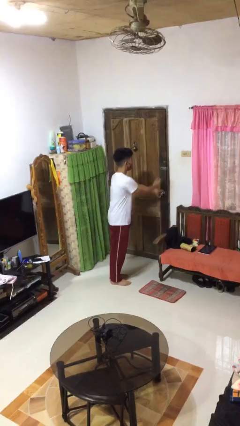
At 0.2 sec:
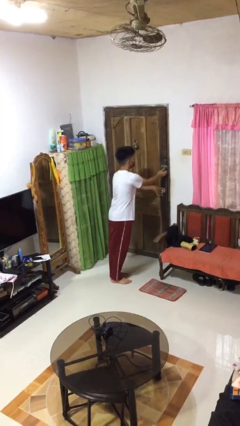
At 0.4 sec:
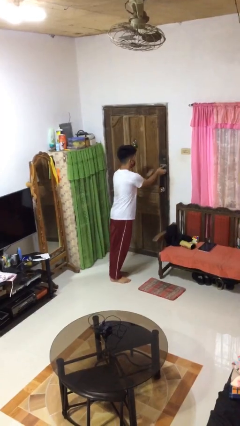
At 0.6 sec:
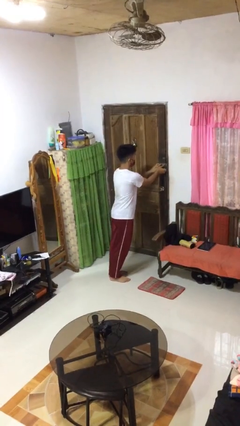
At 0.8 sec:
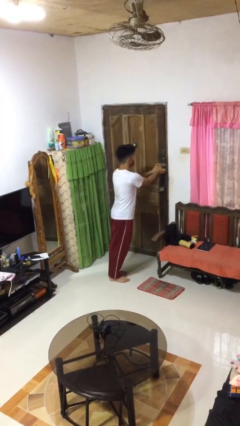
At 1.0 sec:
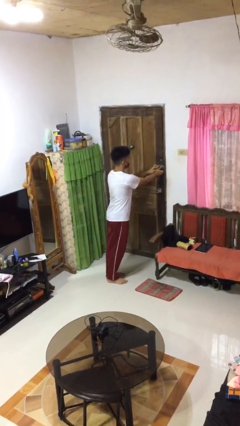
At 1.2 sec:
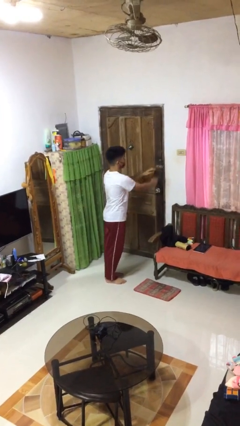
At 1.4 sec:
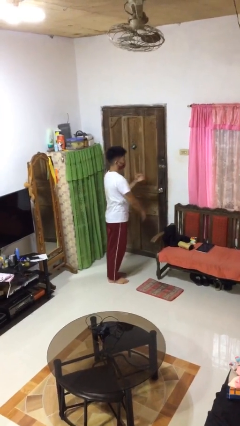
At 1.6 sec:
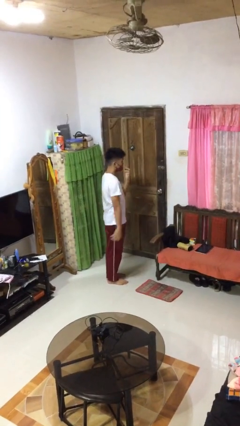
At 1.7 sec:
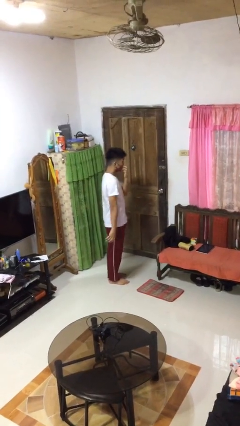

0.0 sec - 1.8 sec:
person locks door with keys

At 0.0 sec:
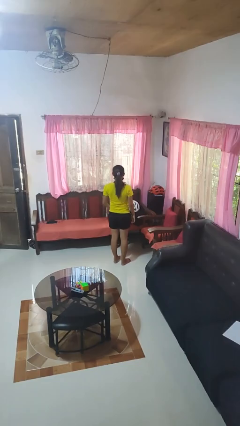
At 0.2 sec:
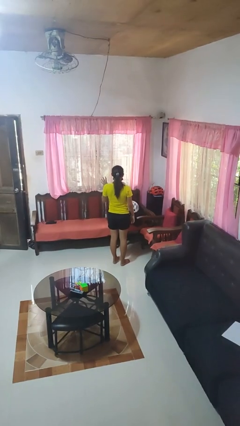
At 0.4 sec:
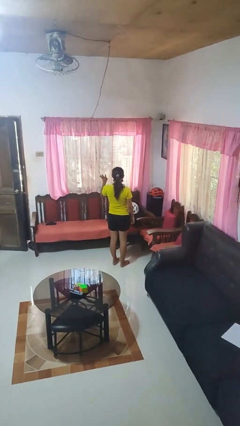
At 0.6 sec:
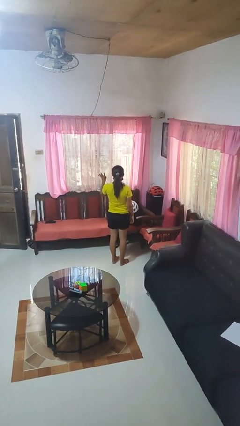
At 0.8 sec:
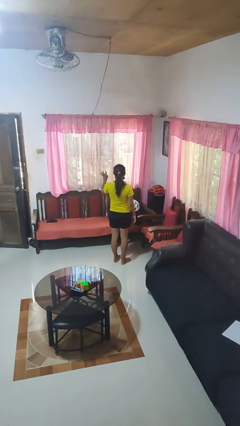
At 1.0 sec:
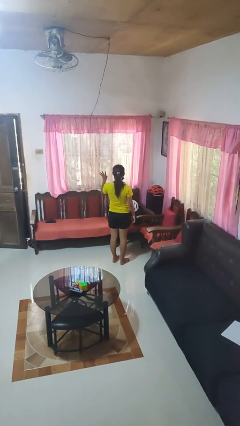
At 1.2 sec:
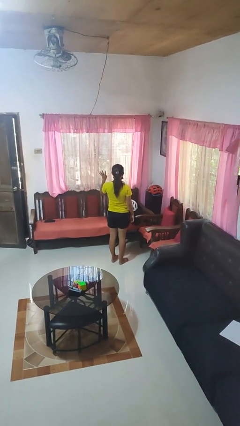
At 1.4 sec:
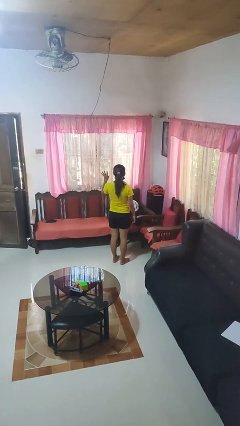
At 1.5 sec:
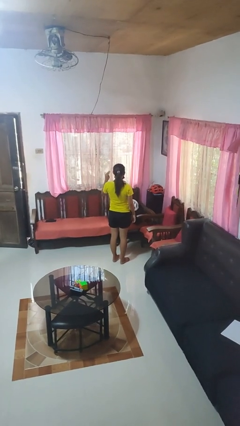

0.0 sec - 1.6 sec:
person gestures number four

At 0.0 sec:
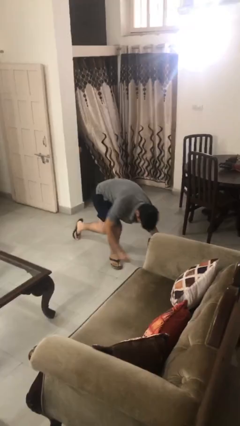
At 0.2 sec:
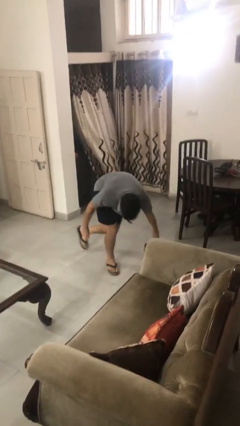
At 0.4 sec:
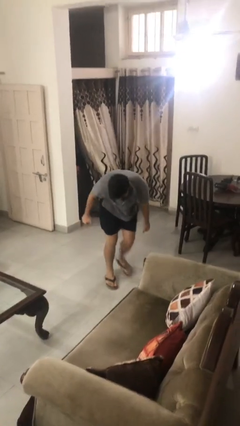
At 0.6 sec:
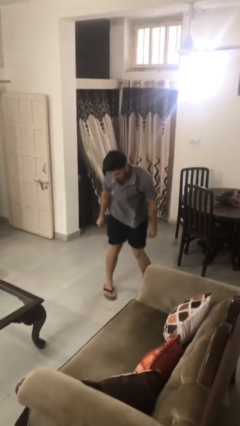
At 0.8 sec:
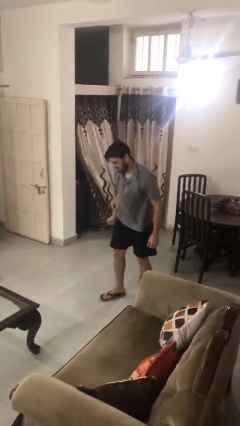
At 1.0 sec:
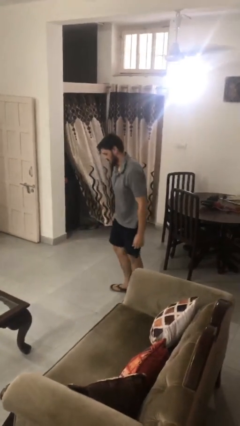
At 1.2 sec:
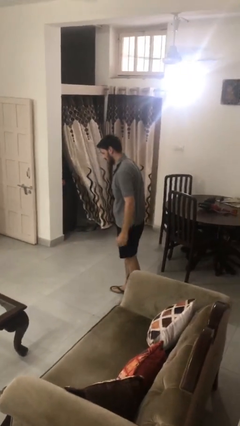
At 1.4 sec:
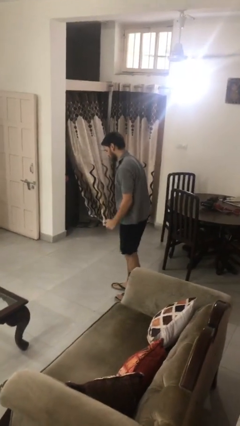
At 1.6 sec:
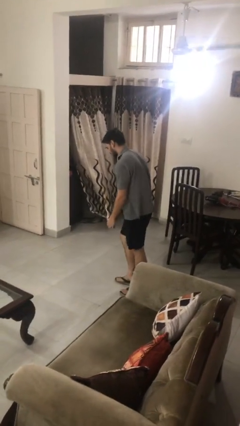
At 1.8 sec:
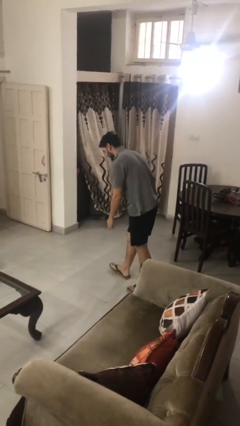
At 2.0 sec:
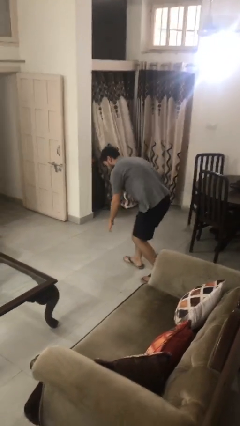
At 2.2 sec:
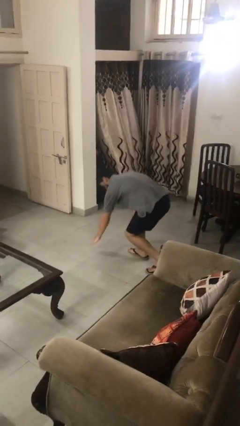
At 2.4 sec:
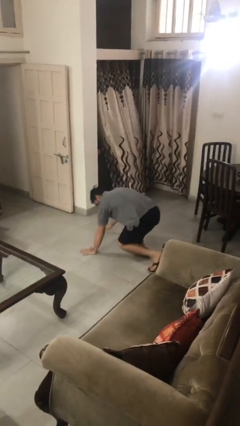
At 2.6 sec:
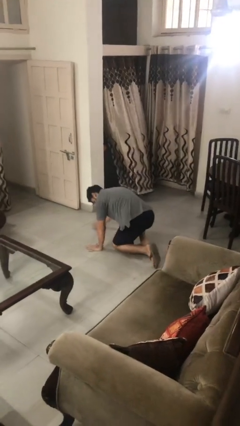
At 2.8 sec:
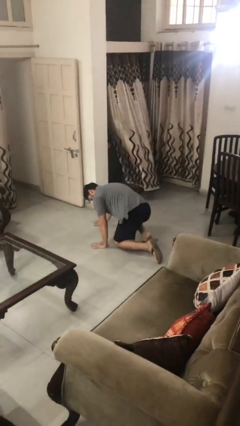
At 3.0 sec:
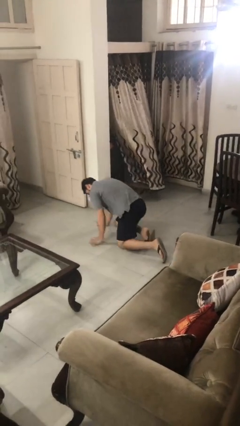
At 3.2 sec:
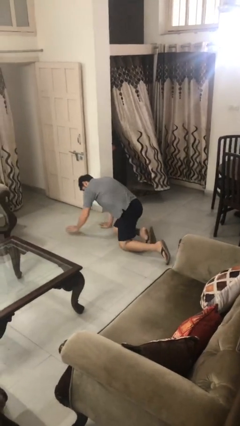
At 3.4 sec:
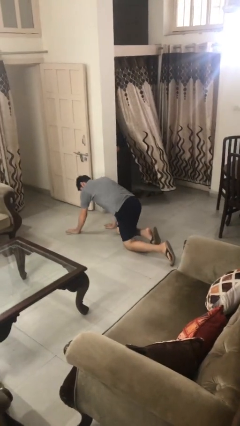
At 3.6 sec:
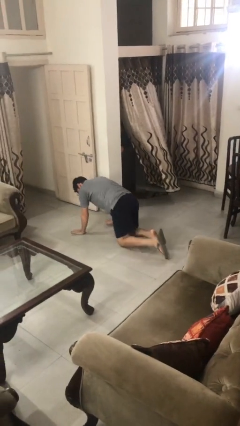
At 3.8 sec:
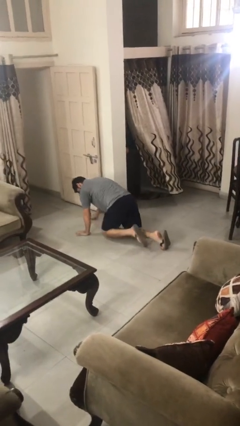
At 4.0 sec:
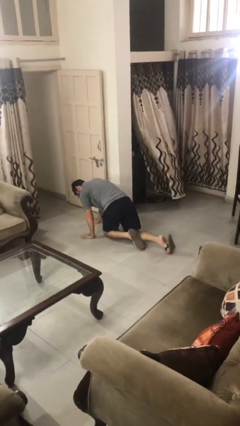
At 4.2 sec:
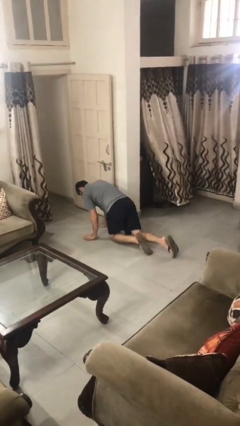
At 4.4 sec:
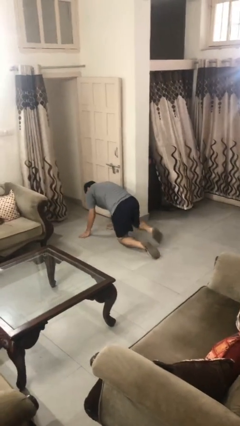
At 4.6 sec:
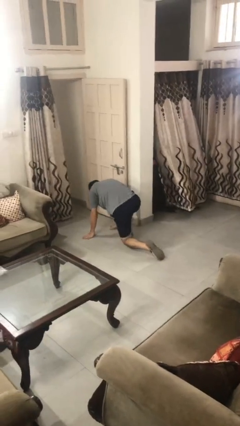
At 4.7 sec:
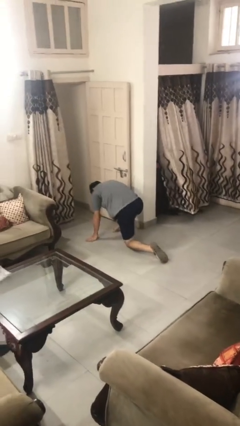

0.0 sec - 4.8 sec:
person crawls

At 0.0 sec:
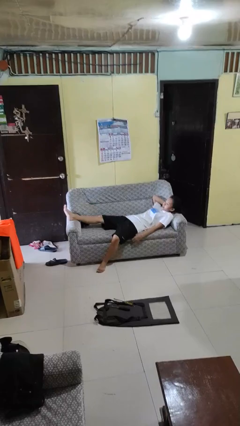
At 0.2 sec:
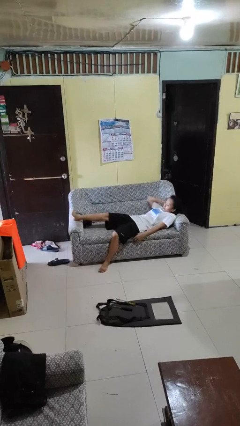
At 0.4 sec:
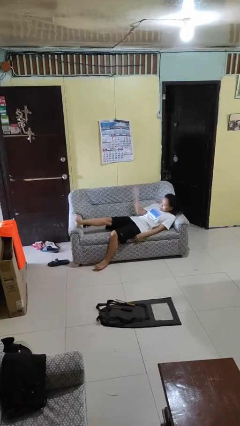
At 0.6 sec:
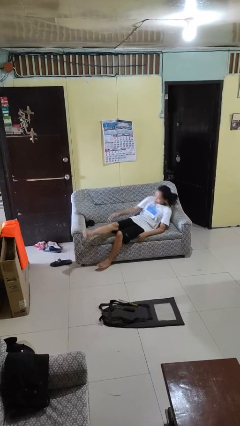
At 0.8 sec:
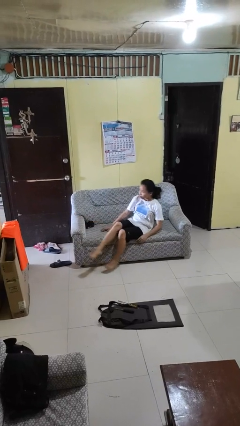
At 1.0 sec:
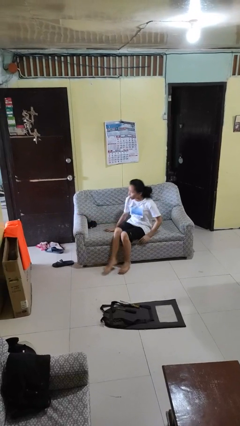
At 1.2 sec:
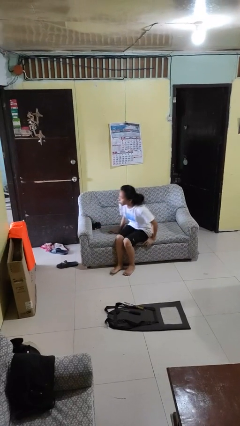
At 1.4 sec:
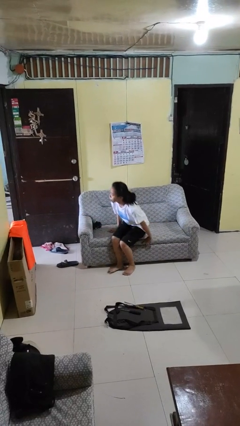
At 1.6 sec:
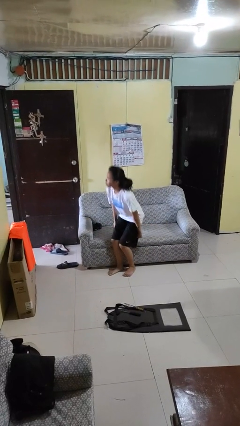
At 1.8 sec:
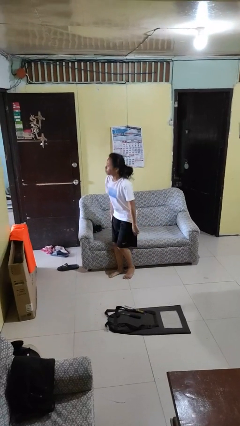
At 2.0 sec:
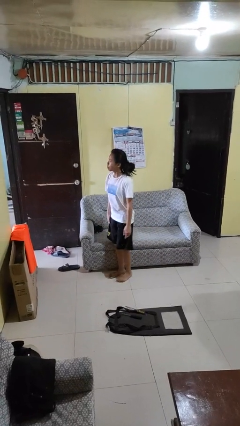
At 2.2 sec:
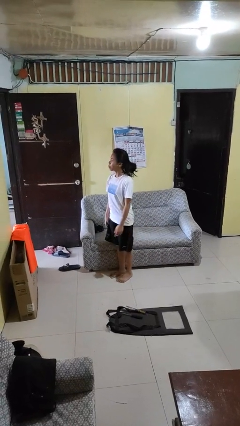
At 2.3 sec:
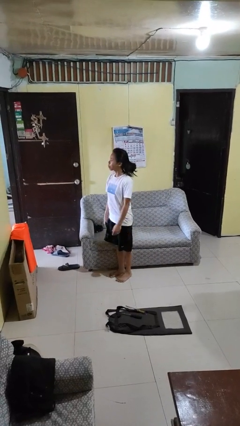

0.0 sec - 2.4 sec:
person stands up

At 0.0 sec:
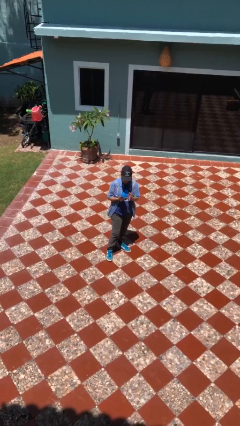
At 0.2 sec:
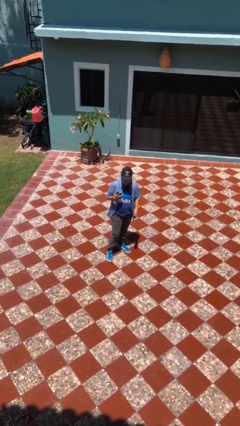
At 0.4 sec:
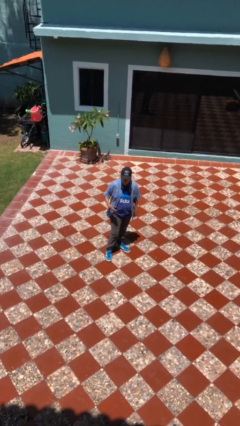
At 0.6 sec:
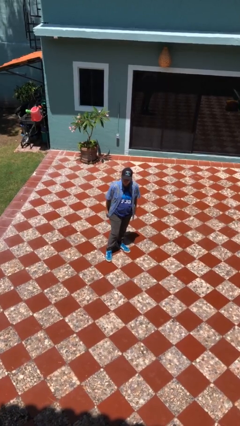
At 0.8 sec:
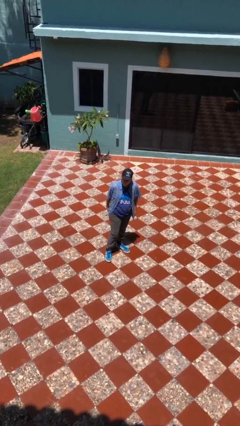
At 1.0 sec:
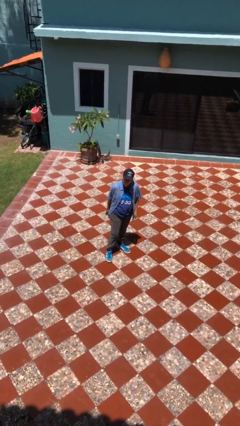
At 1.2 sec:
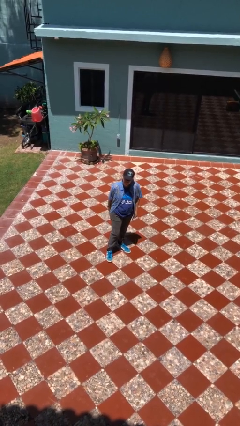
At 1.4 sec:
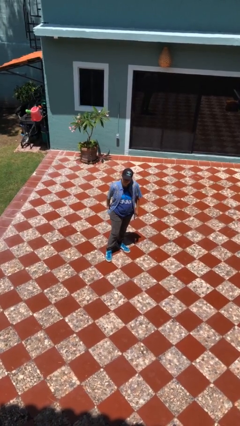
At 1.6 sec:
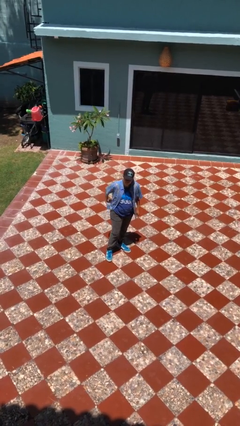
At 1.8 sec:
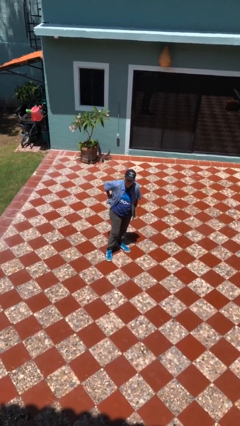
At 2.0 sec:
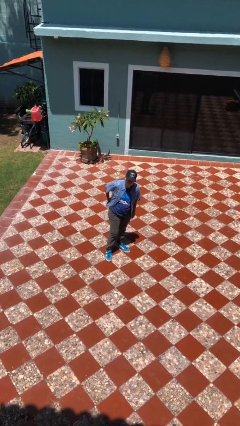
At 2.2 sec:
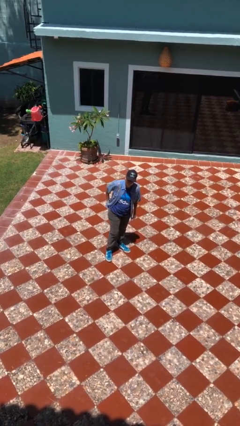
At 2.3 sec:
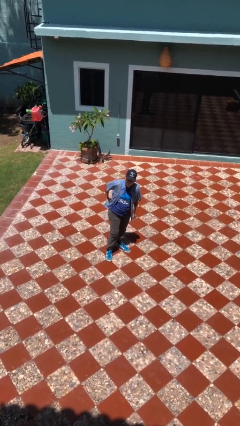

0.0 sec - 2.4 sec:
person puts phone into pocket

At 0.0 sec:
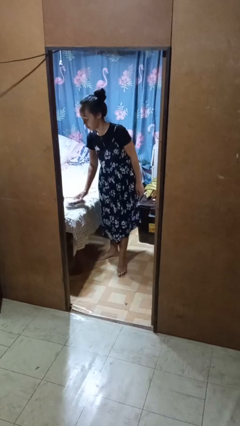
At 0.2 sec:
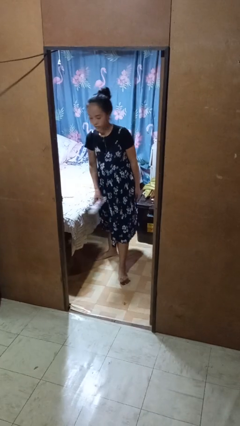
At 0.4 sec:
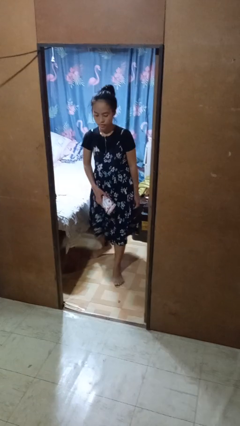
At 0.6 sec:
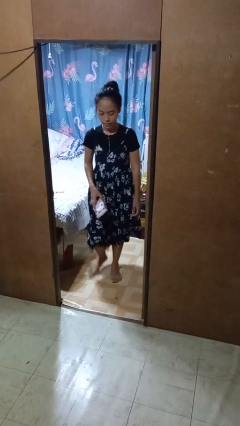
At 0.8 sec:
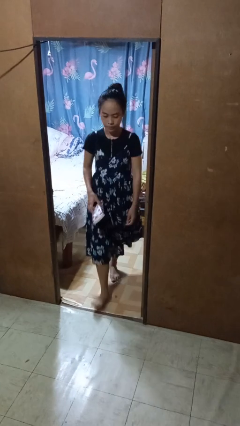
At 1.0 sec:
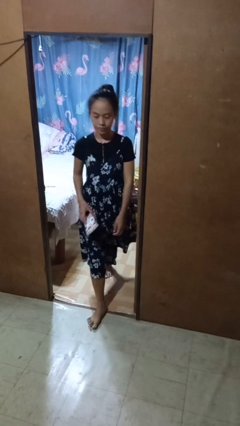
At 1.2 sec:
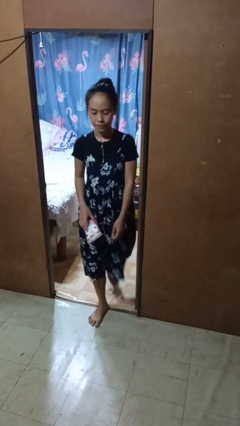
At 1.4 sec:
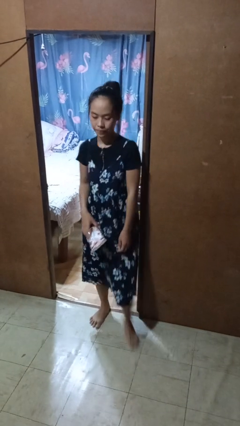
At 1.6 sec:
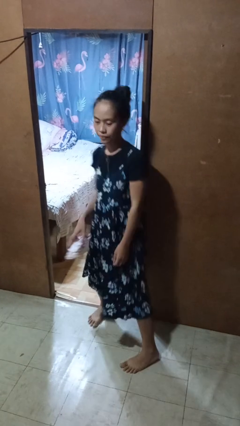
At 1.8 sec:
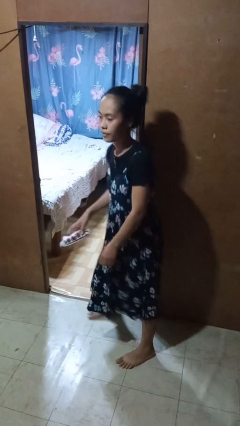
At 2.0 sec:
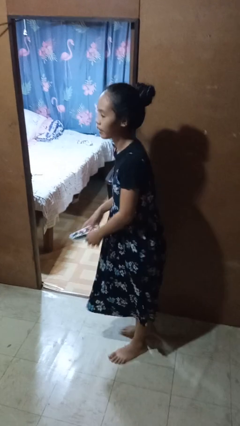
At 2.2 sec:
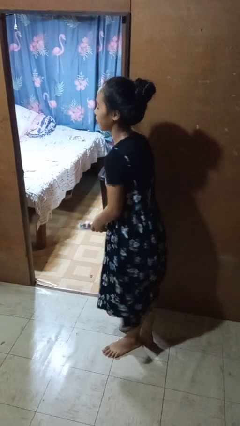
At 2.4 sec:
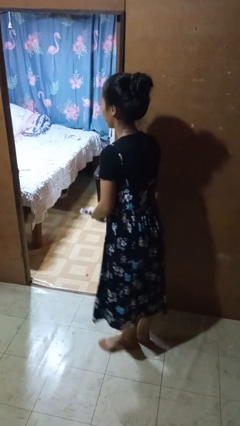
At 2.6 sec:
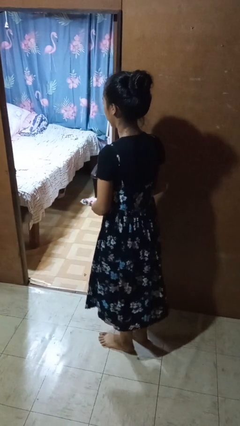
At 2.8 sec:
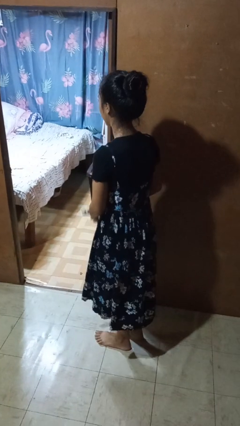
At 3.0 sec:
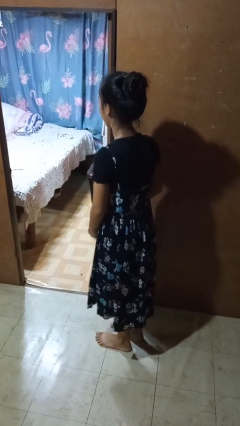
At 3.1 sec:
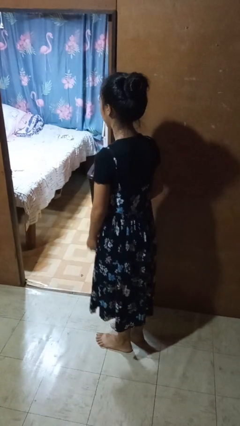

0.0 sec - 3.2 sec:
person picks up object from bed

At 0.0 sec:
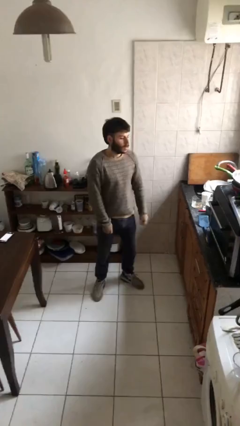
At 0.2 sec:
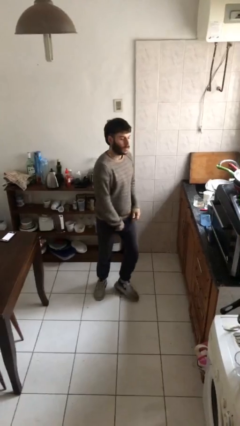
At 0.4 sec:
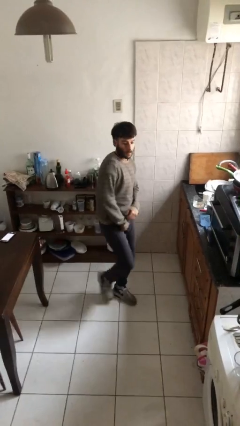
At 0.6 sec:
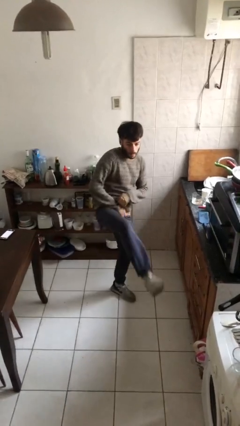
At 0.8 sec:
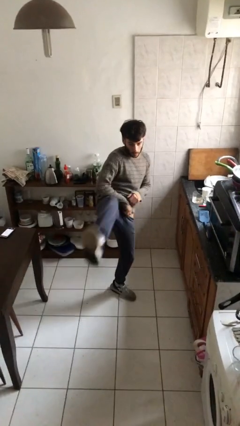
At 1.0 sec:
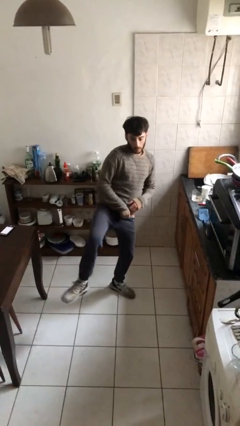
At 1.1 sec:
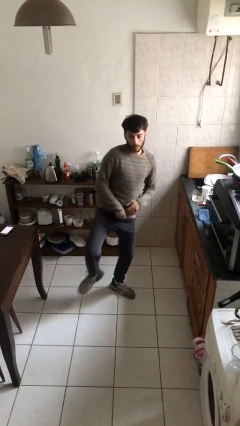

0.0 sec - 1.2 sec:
person karate kicks
